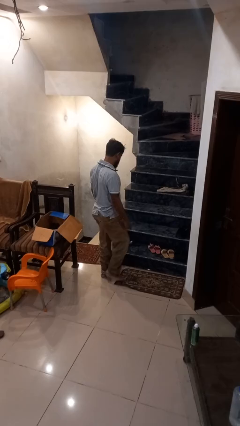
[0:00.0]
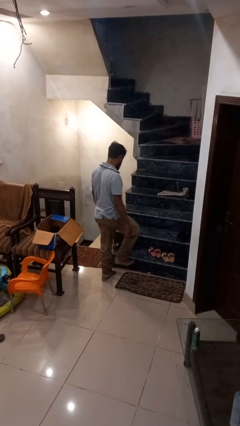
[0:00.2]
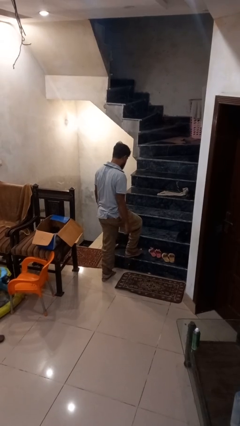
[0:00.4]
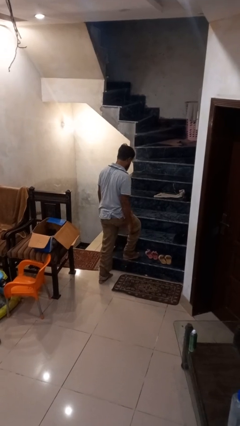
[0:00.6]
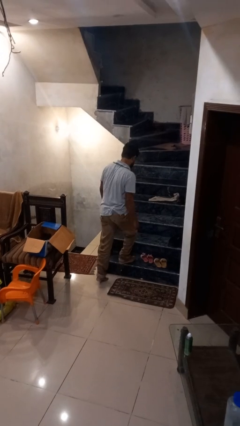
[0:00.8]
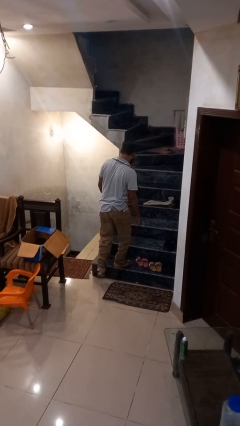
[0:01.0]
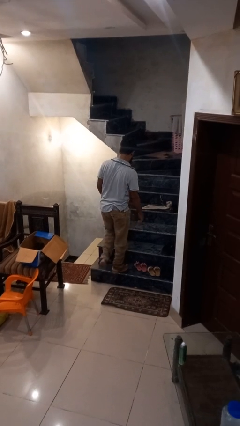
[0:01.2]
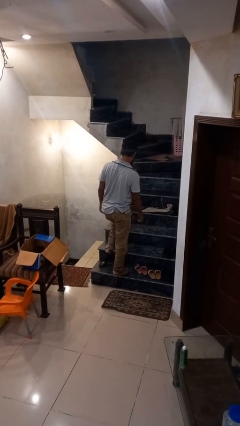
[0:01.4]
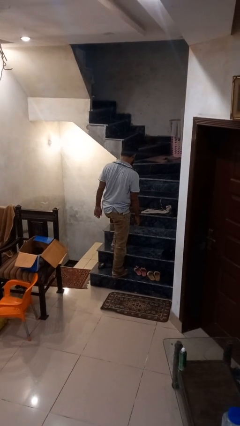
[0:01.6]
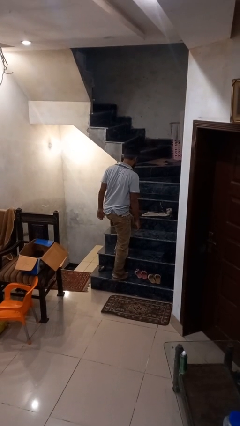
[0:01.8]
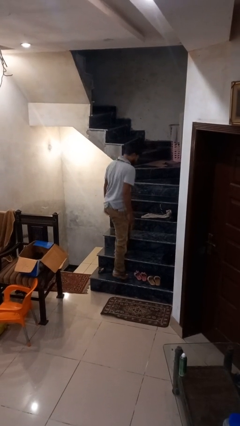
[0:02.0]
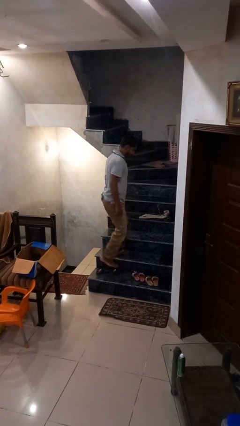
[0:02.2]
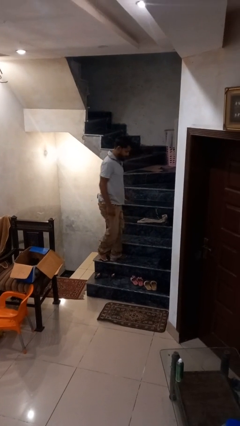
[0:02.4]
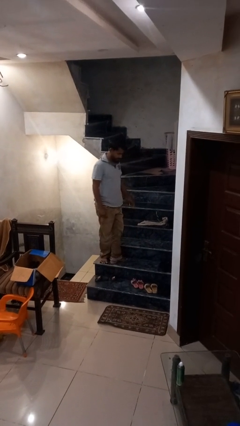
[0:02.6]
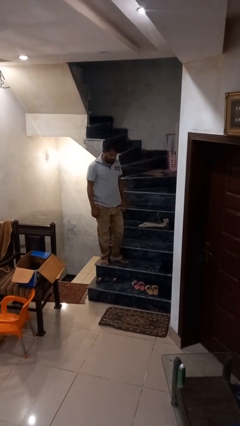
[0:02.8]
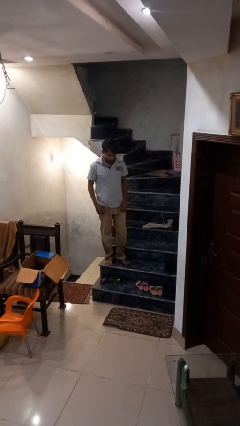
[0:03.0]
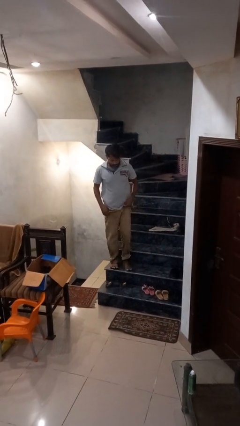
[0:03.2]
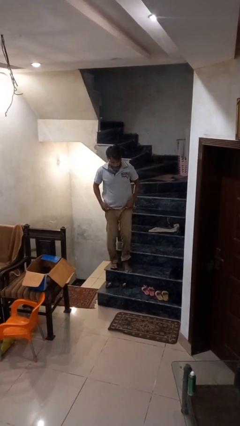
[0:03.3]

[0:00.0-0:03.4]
person climbs up stairs

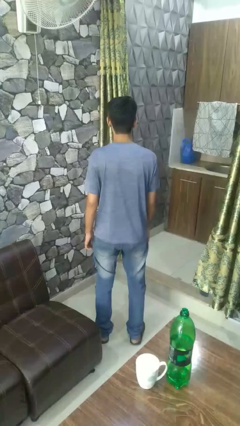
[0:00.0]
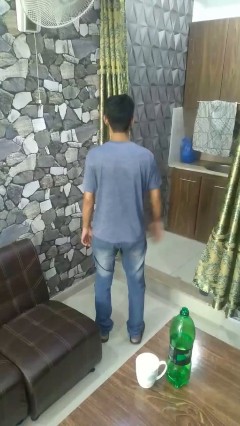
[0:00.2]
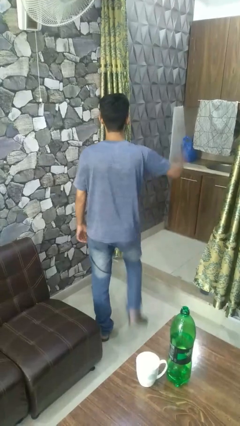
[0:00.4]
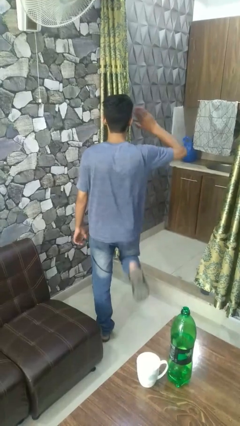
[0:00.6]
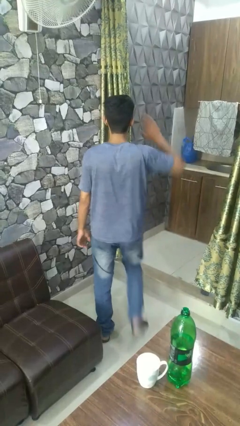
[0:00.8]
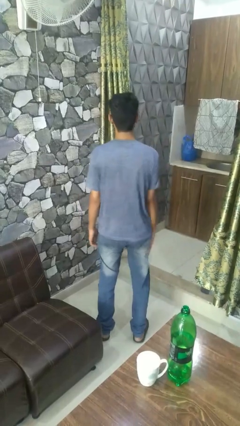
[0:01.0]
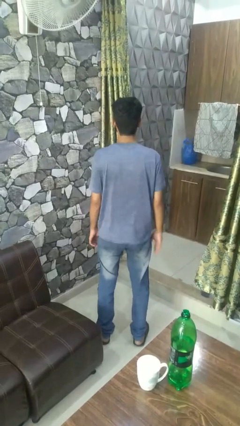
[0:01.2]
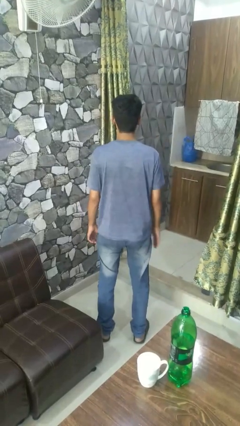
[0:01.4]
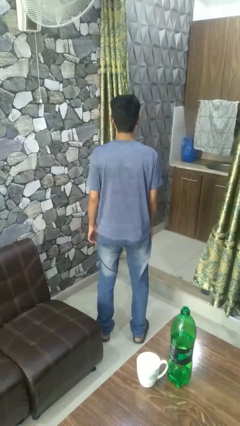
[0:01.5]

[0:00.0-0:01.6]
person salutes

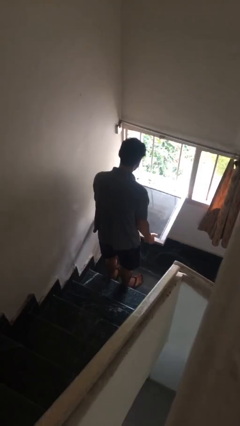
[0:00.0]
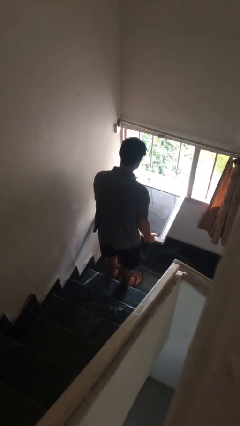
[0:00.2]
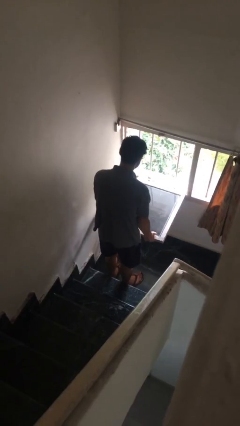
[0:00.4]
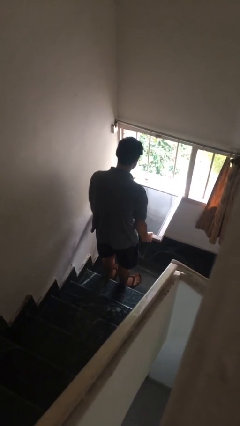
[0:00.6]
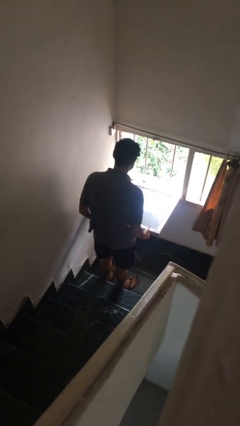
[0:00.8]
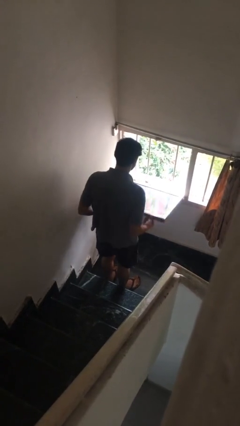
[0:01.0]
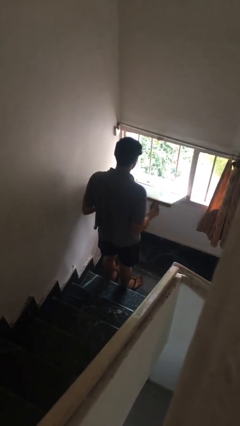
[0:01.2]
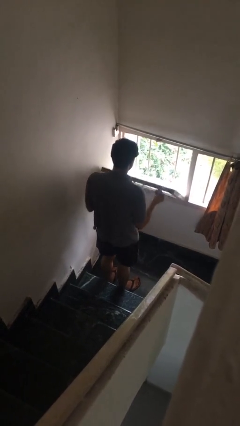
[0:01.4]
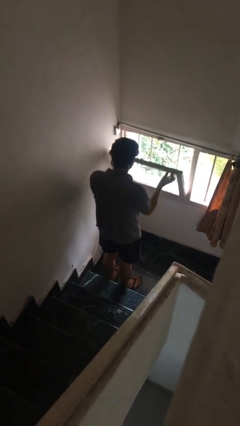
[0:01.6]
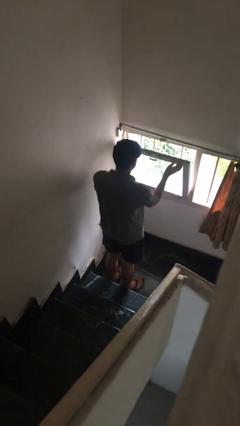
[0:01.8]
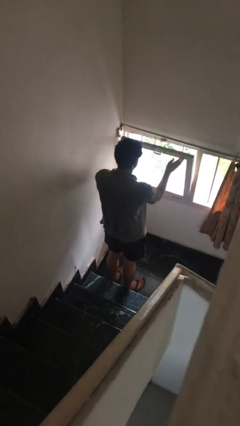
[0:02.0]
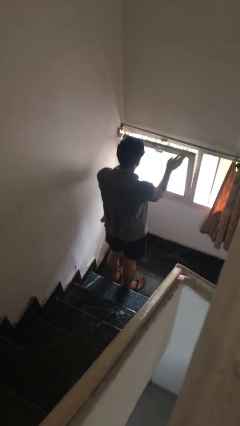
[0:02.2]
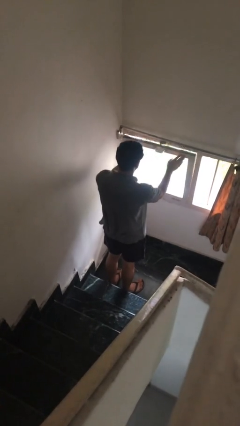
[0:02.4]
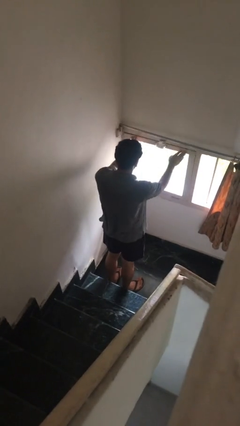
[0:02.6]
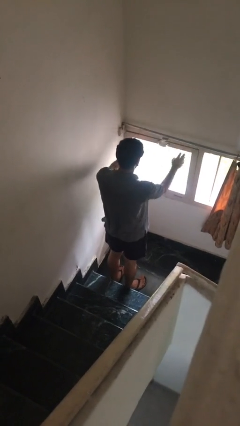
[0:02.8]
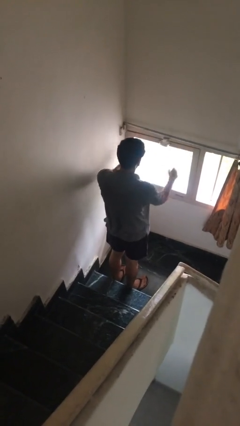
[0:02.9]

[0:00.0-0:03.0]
person closes home window

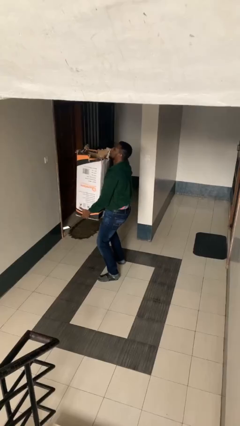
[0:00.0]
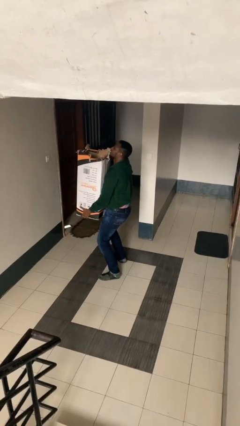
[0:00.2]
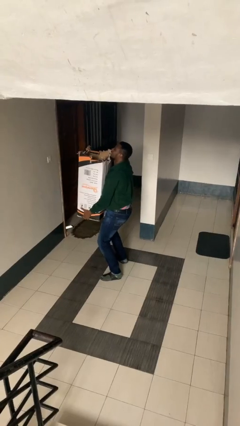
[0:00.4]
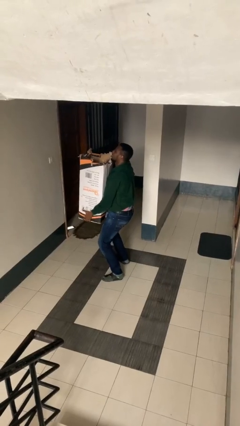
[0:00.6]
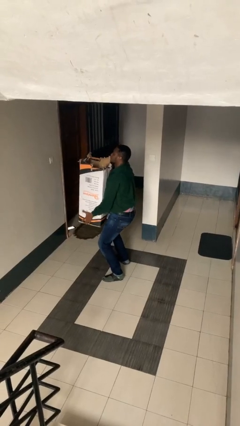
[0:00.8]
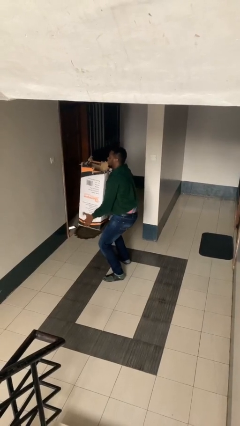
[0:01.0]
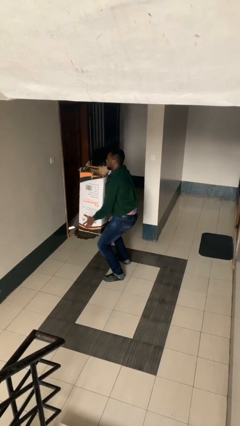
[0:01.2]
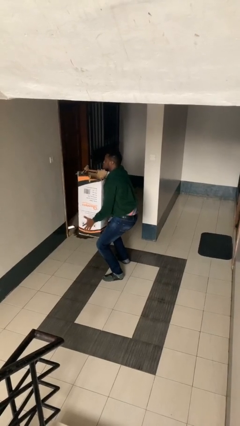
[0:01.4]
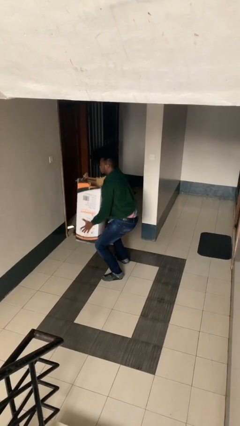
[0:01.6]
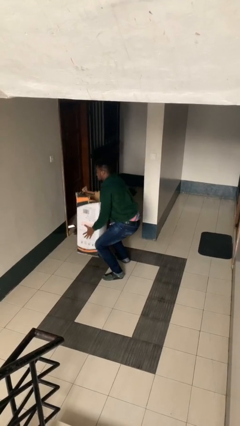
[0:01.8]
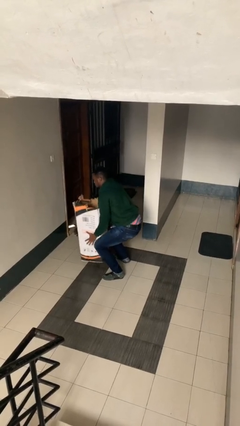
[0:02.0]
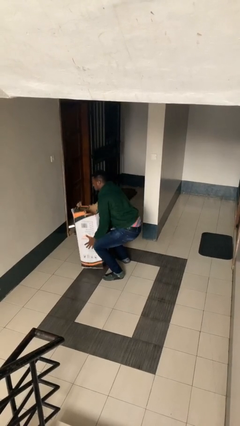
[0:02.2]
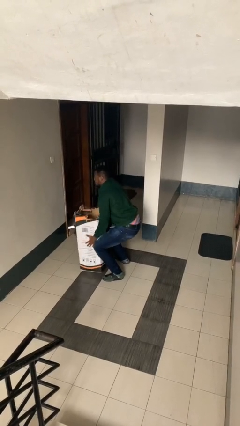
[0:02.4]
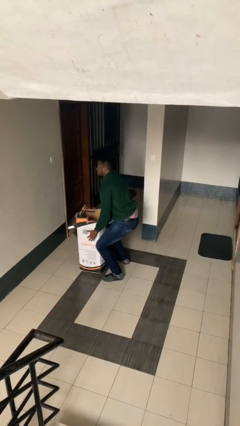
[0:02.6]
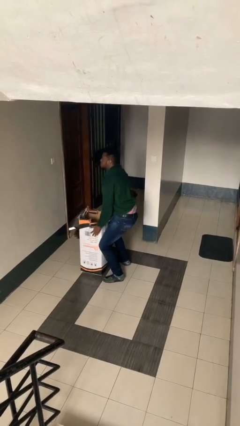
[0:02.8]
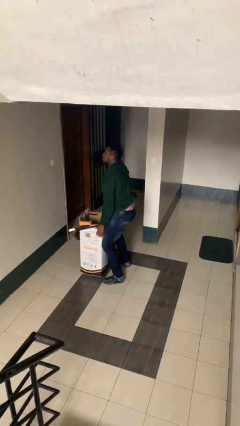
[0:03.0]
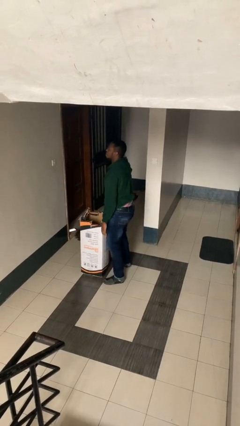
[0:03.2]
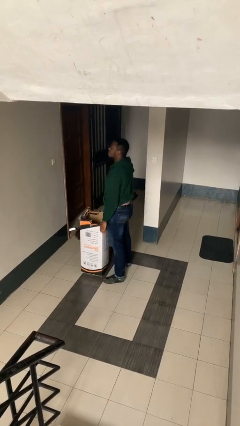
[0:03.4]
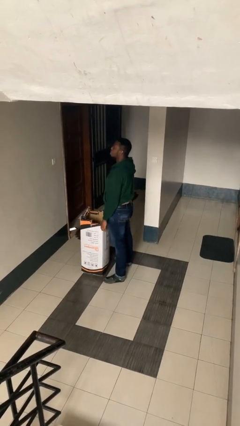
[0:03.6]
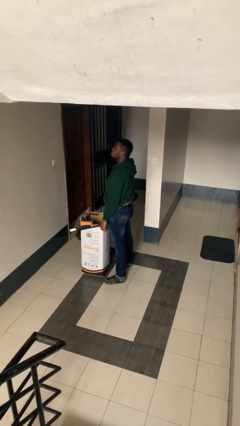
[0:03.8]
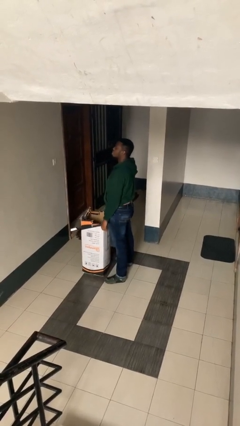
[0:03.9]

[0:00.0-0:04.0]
person puts down object on floor

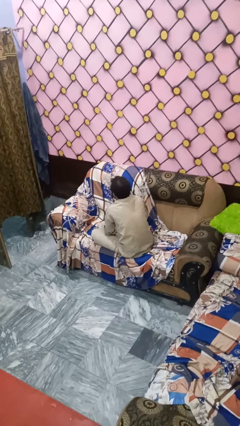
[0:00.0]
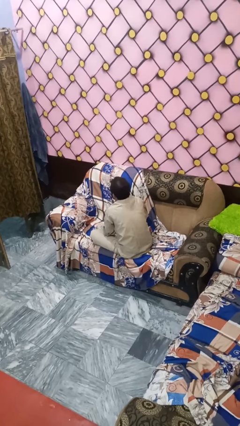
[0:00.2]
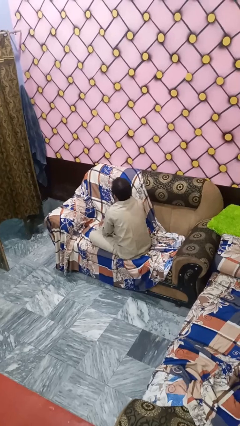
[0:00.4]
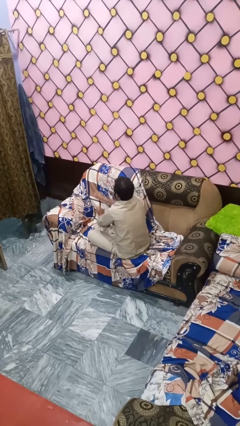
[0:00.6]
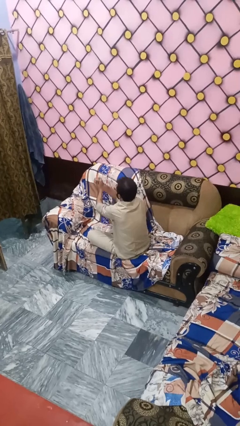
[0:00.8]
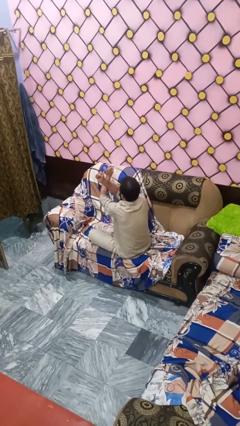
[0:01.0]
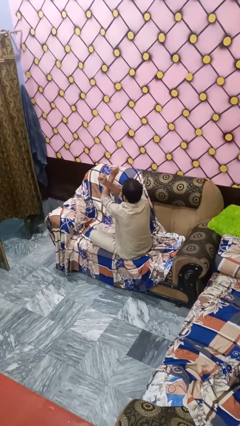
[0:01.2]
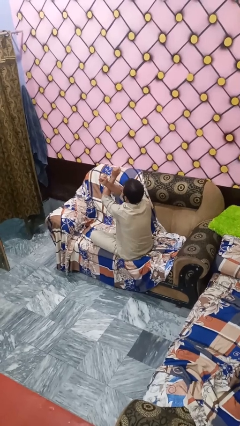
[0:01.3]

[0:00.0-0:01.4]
person gestures arms x

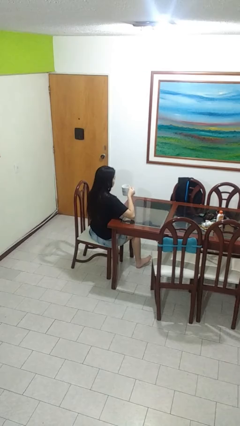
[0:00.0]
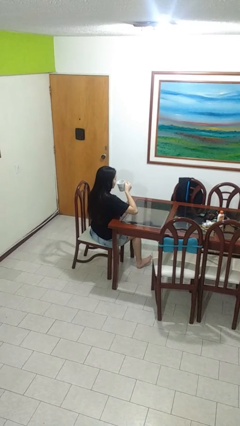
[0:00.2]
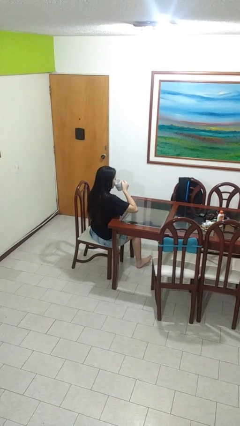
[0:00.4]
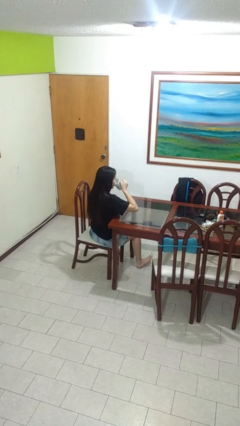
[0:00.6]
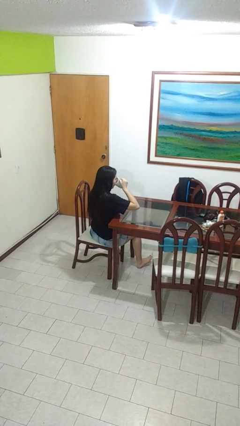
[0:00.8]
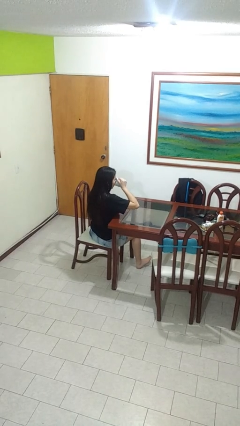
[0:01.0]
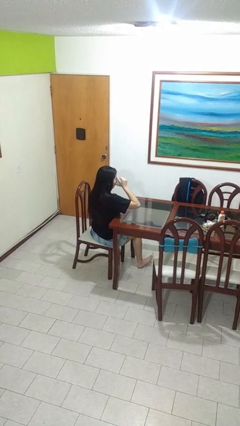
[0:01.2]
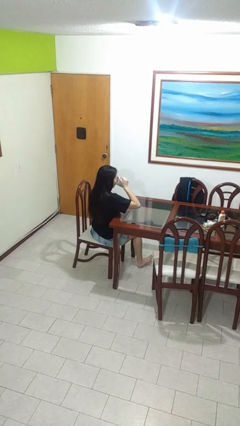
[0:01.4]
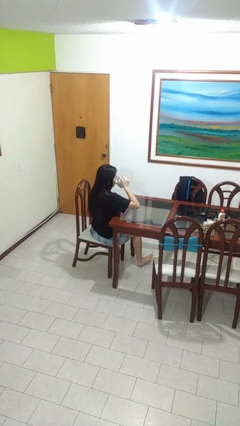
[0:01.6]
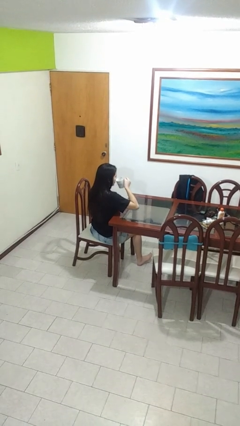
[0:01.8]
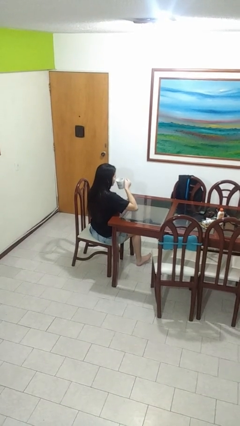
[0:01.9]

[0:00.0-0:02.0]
person drinks from mug

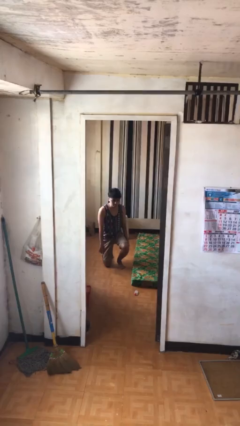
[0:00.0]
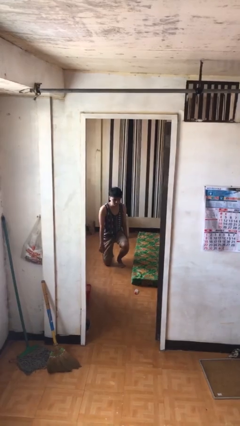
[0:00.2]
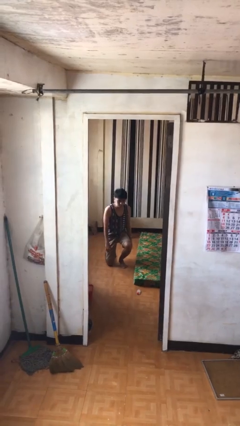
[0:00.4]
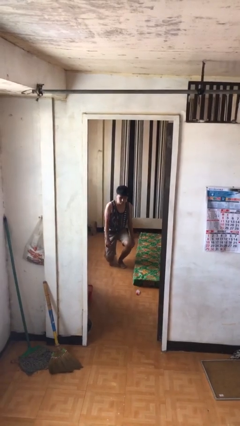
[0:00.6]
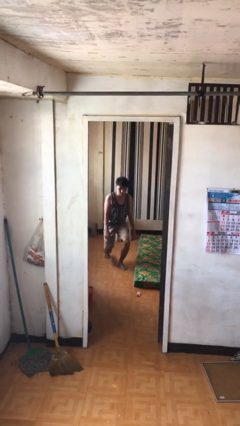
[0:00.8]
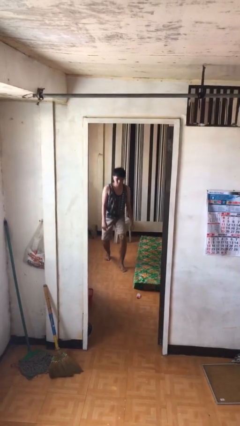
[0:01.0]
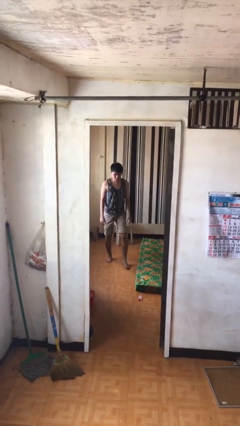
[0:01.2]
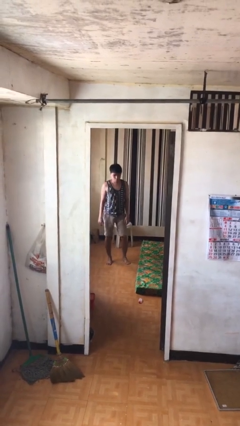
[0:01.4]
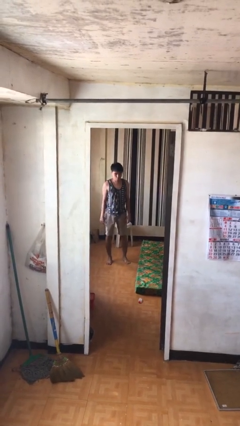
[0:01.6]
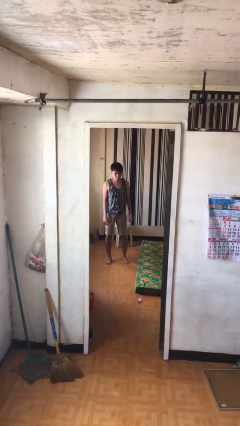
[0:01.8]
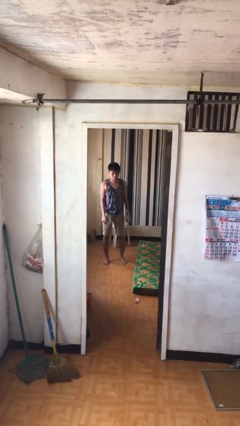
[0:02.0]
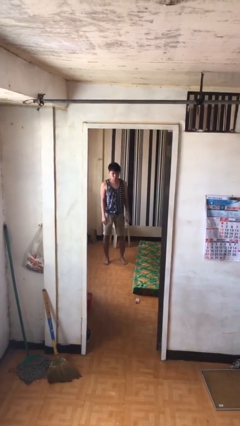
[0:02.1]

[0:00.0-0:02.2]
person stands up from floor
